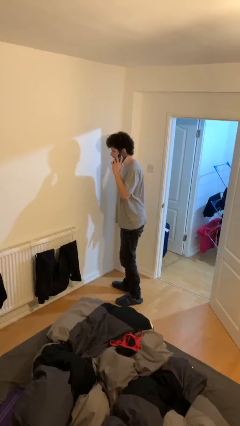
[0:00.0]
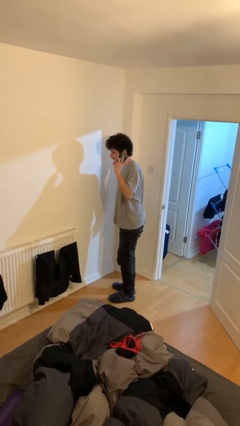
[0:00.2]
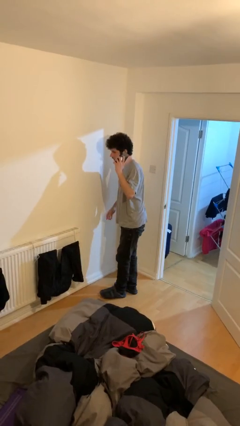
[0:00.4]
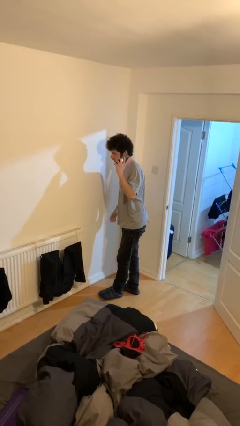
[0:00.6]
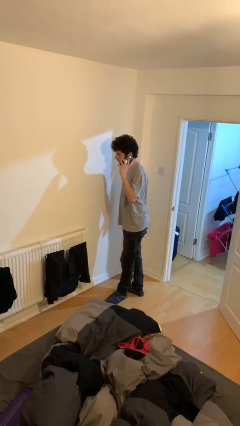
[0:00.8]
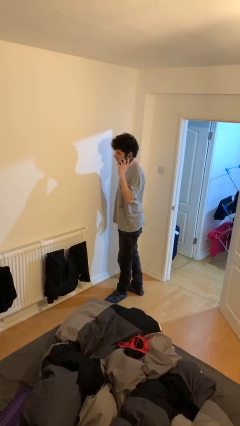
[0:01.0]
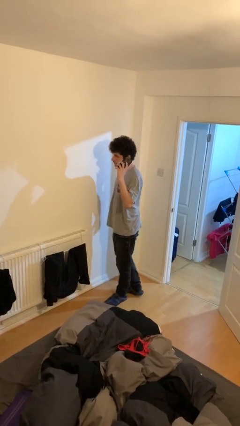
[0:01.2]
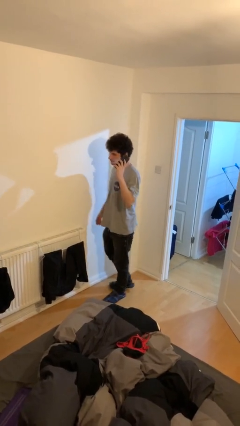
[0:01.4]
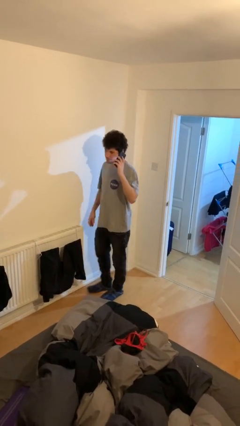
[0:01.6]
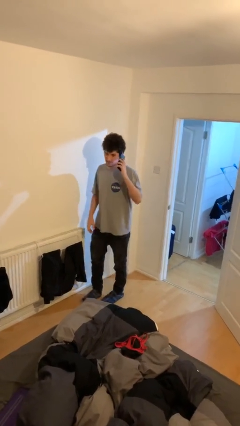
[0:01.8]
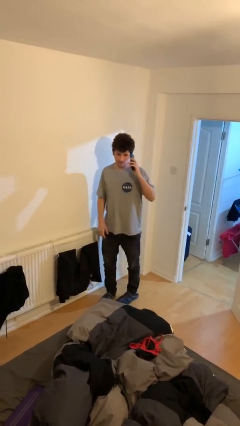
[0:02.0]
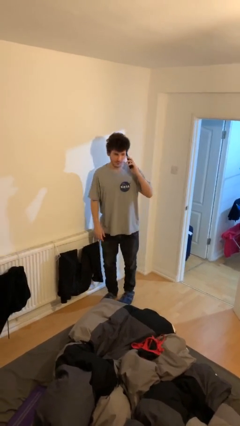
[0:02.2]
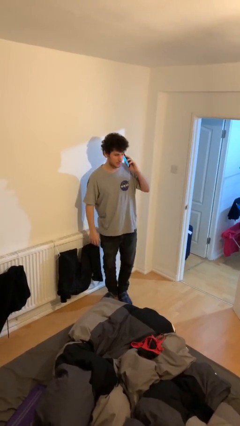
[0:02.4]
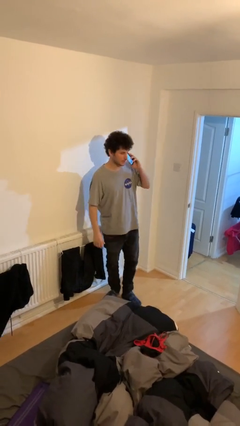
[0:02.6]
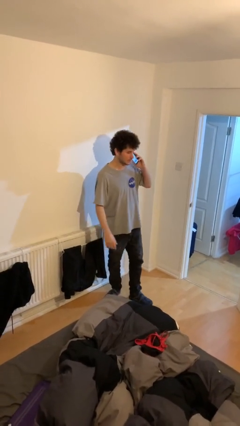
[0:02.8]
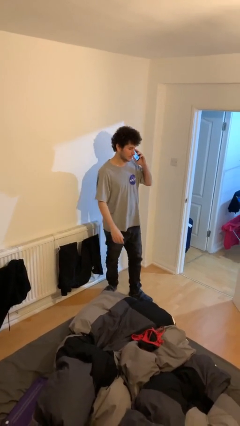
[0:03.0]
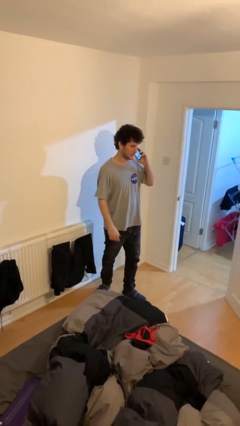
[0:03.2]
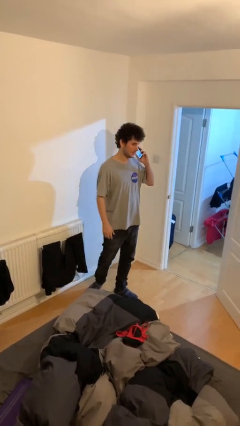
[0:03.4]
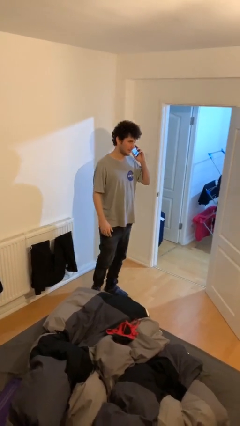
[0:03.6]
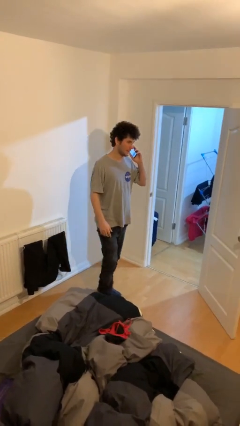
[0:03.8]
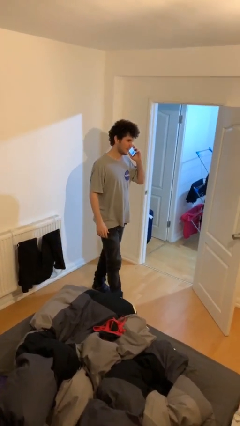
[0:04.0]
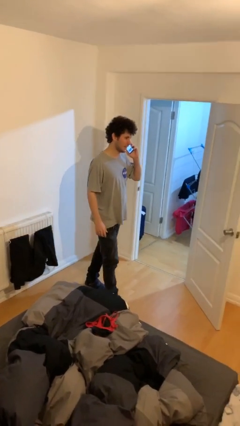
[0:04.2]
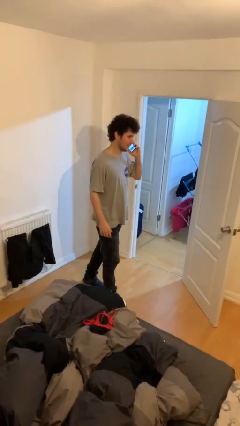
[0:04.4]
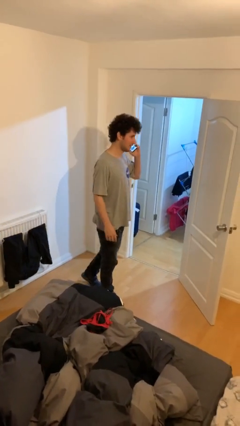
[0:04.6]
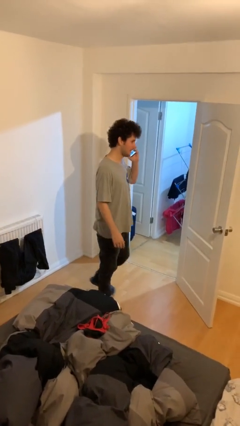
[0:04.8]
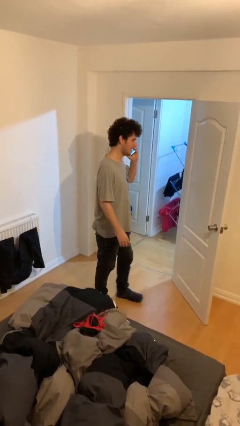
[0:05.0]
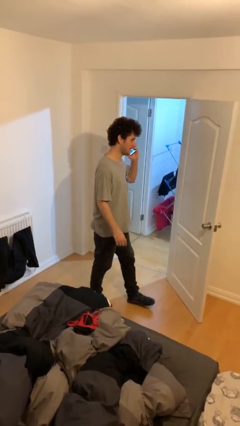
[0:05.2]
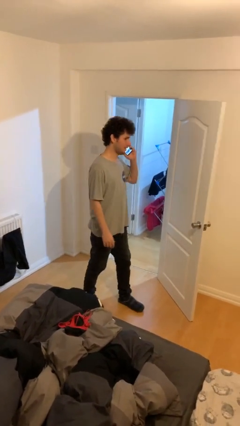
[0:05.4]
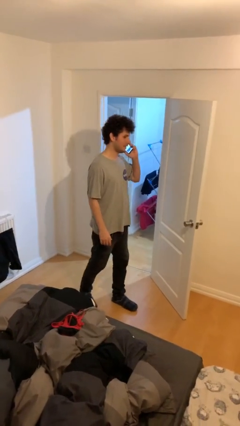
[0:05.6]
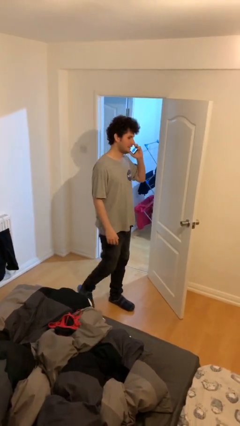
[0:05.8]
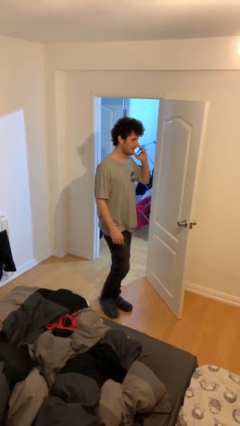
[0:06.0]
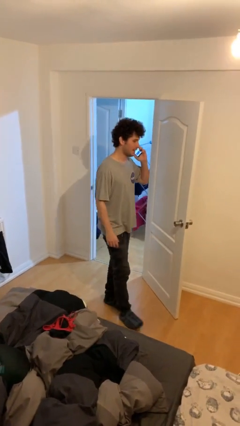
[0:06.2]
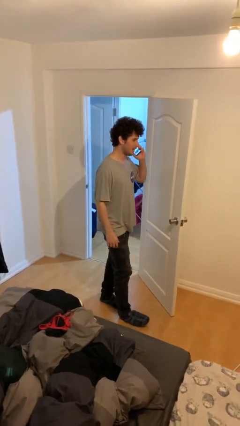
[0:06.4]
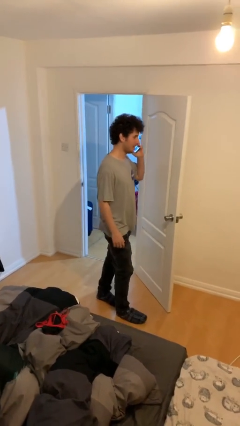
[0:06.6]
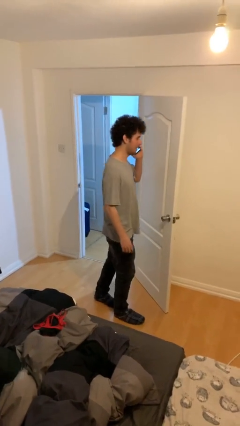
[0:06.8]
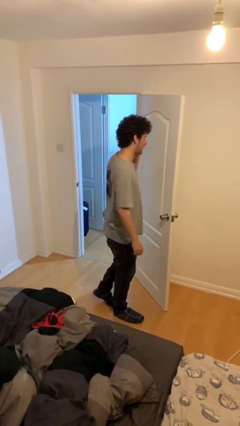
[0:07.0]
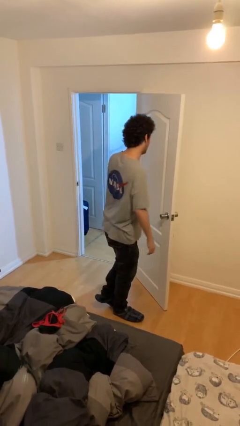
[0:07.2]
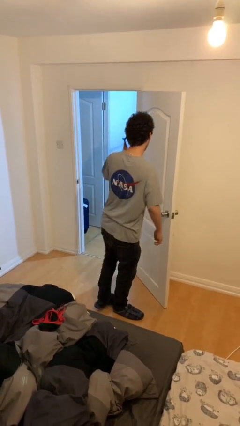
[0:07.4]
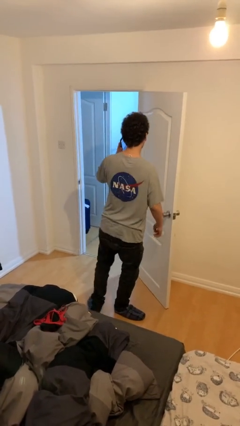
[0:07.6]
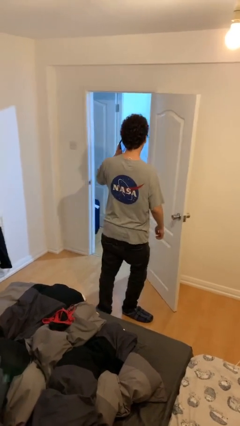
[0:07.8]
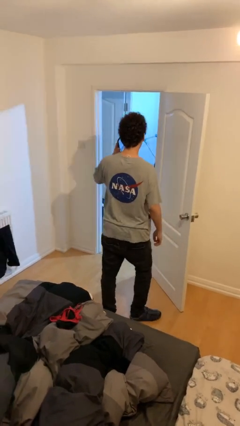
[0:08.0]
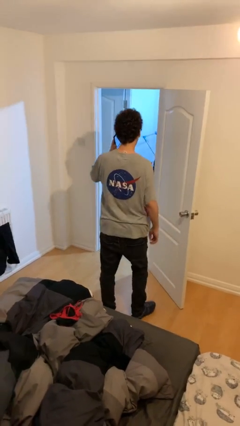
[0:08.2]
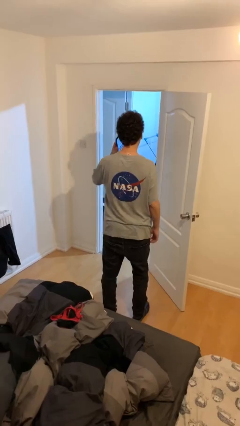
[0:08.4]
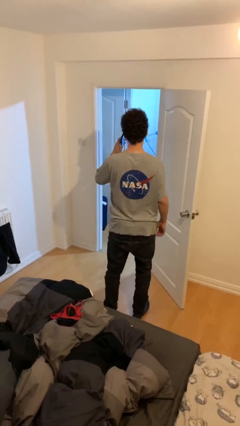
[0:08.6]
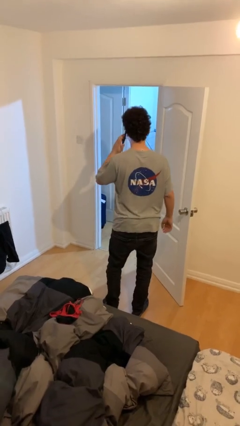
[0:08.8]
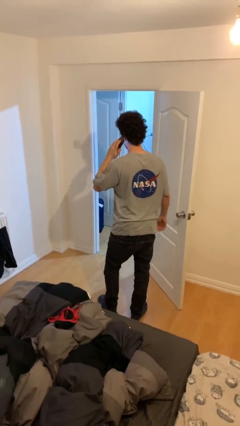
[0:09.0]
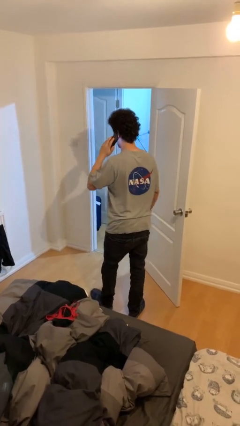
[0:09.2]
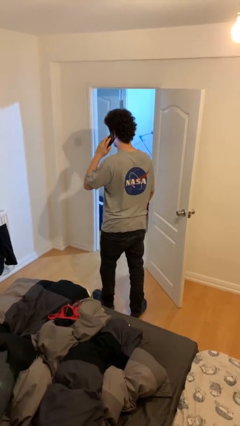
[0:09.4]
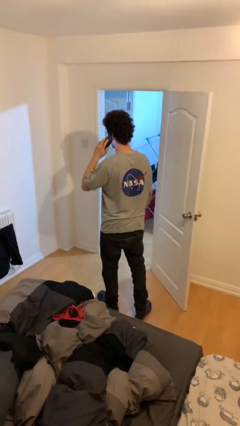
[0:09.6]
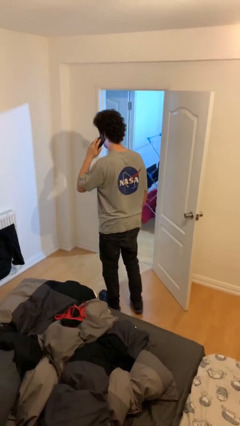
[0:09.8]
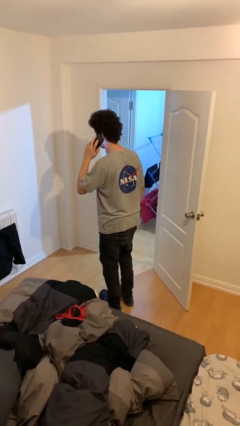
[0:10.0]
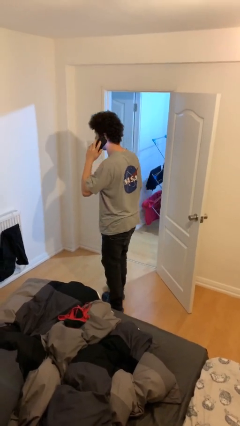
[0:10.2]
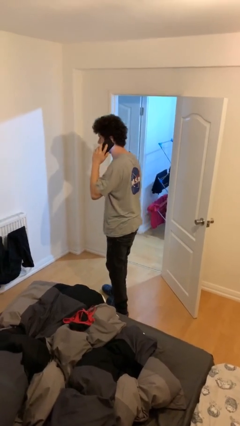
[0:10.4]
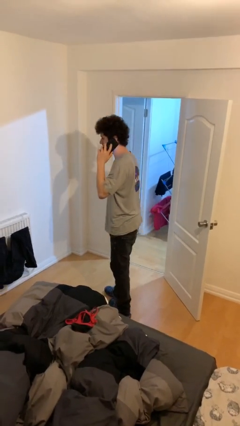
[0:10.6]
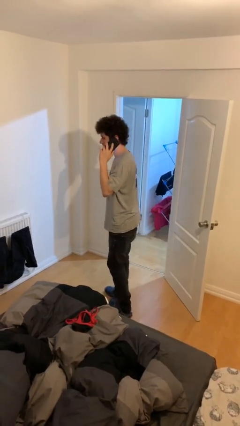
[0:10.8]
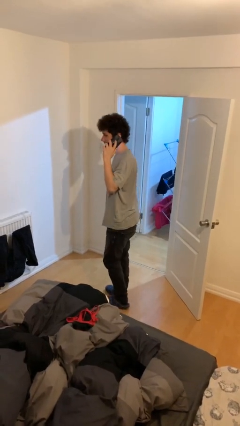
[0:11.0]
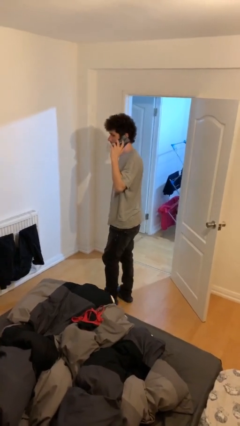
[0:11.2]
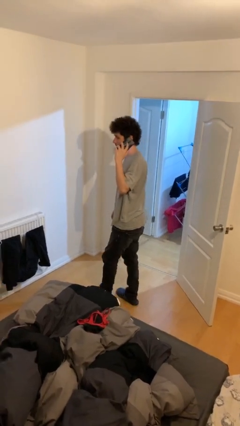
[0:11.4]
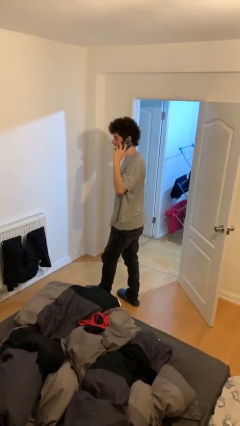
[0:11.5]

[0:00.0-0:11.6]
person talks on phone

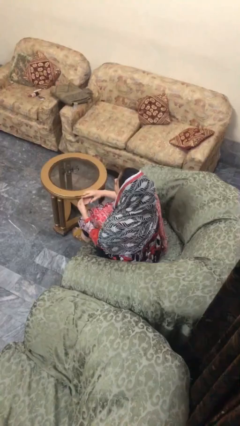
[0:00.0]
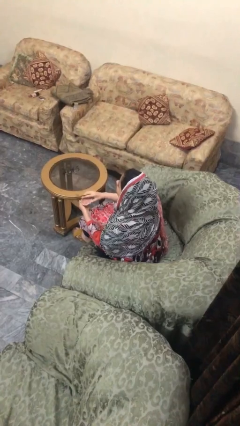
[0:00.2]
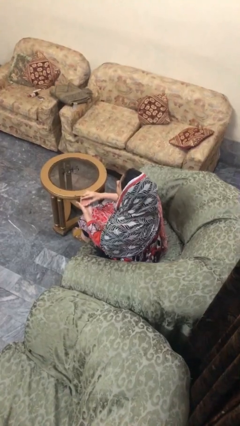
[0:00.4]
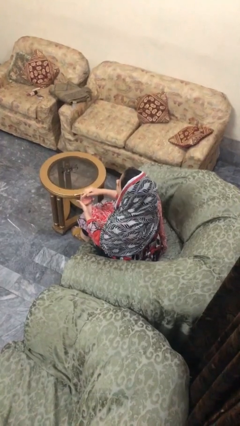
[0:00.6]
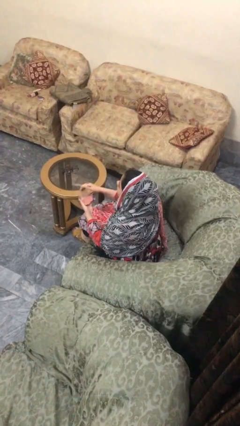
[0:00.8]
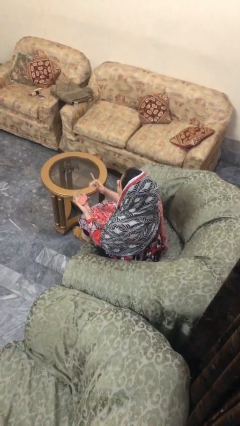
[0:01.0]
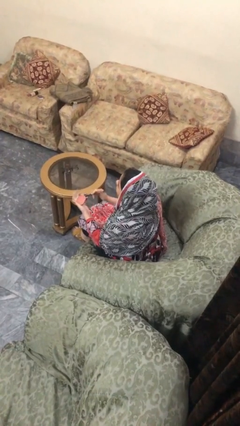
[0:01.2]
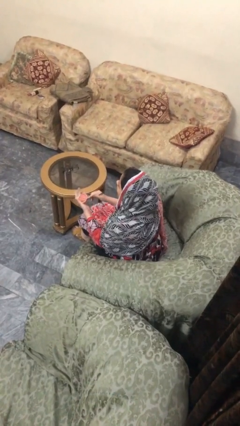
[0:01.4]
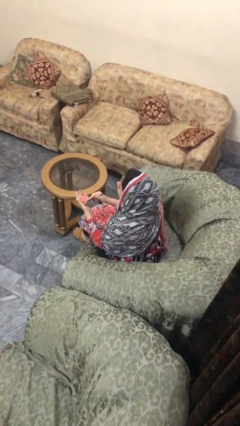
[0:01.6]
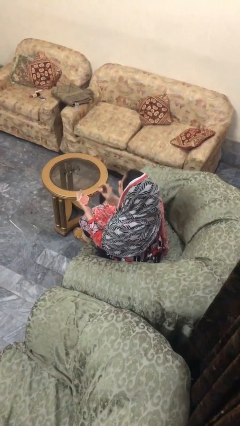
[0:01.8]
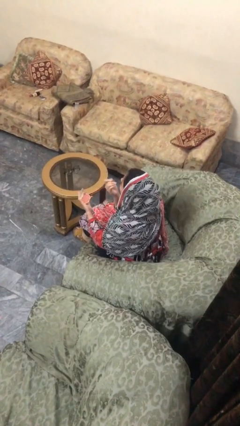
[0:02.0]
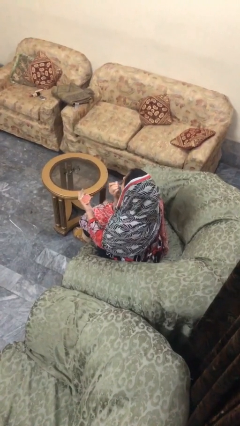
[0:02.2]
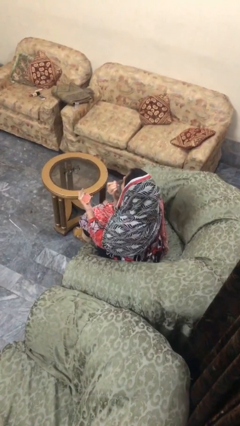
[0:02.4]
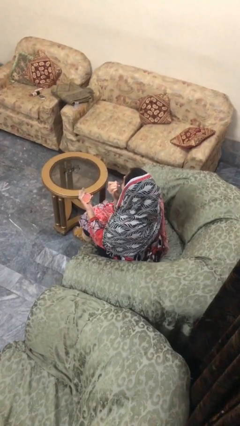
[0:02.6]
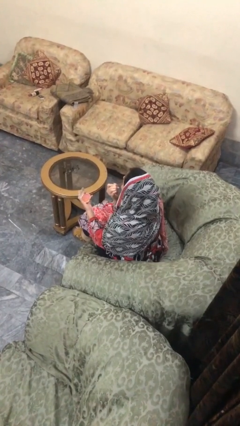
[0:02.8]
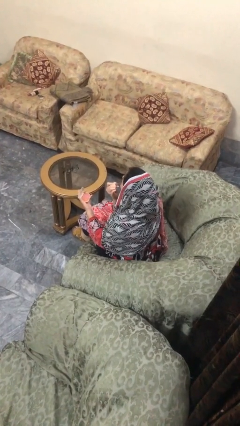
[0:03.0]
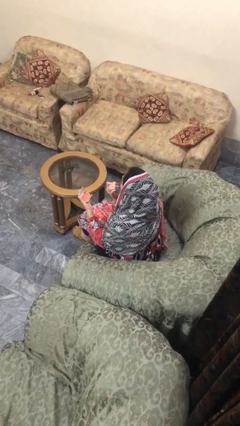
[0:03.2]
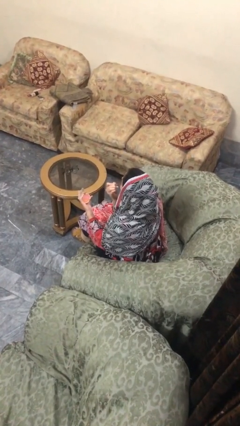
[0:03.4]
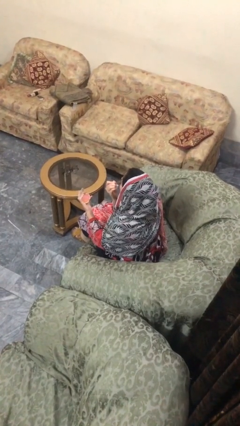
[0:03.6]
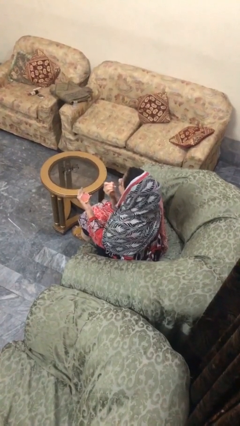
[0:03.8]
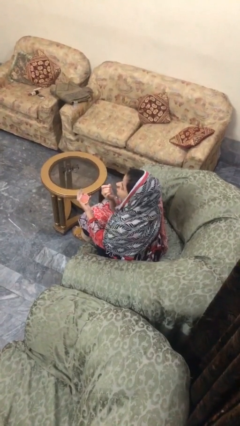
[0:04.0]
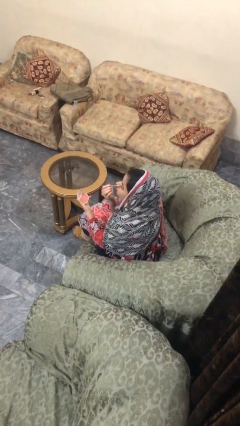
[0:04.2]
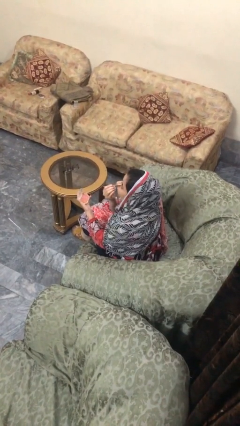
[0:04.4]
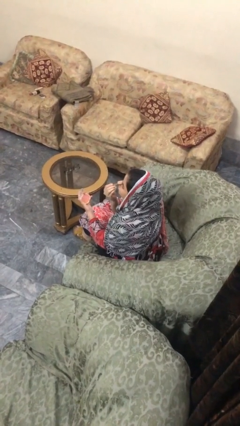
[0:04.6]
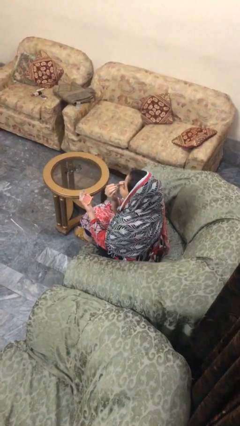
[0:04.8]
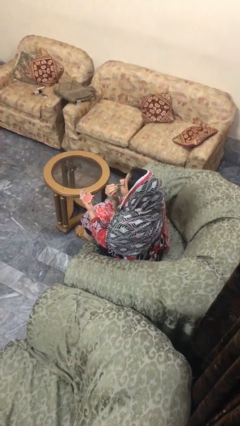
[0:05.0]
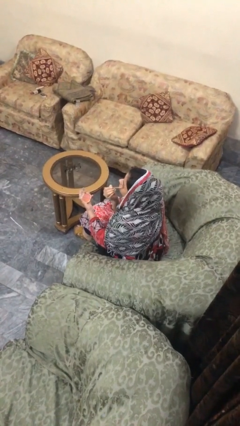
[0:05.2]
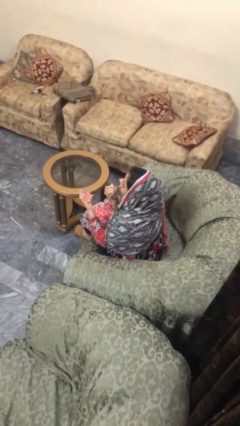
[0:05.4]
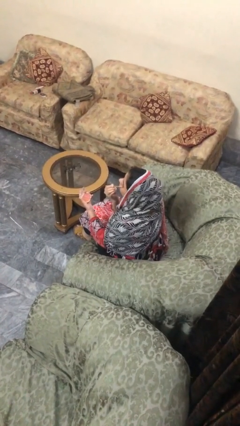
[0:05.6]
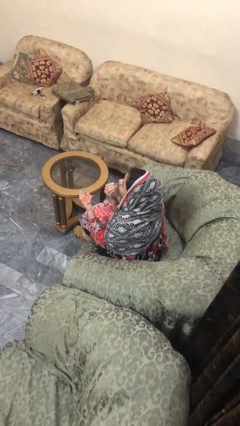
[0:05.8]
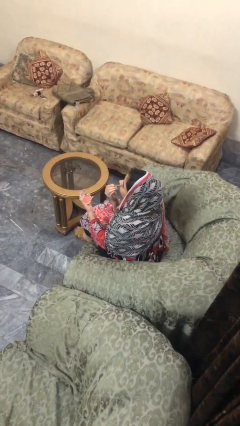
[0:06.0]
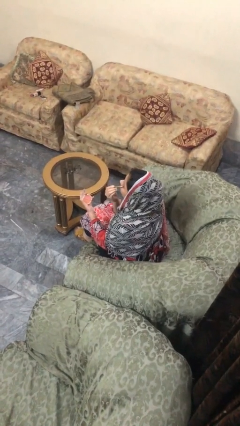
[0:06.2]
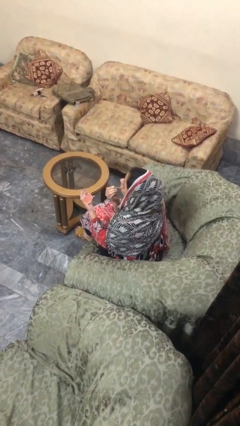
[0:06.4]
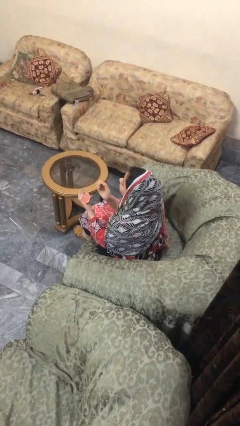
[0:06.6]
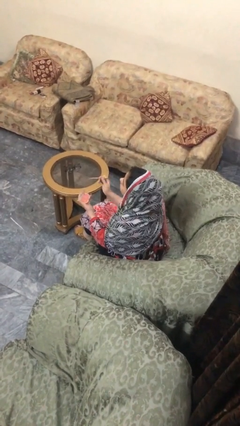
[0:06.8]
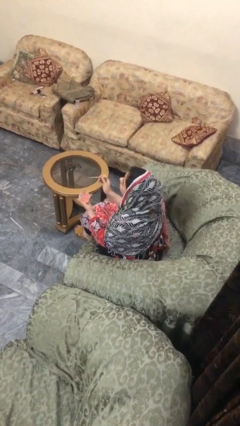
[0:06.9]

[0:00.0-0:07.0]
person applies eye makeup
